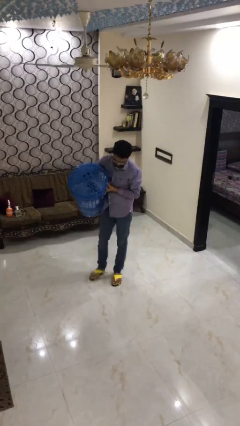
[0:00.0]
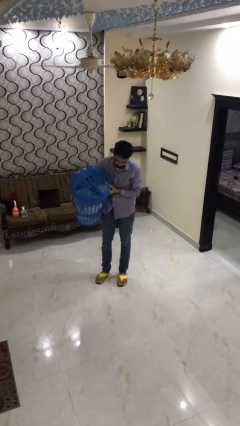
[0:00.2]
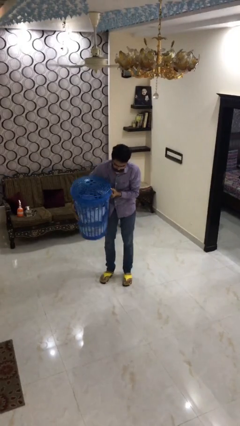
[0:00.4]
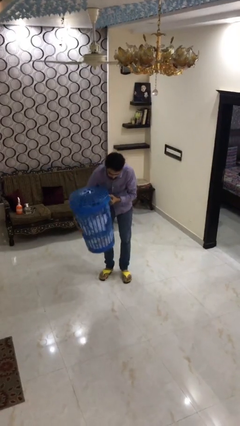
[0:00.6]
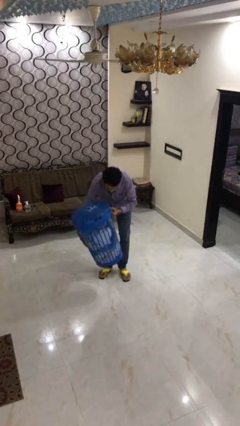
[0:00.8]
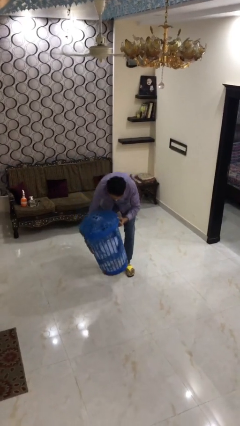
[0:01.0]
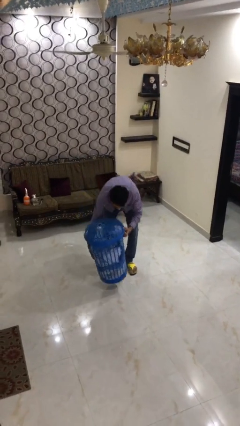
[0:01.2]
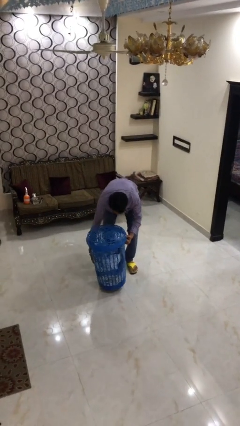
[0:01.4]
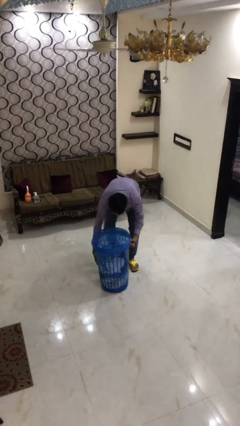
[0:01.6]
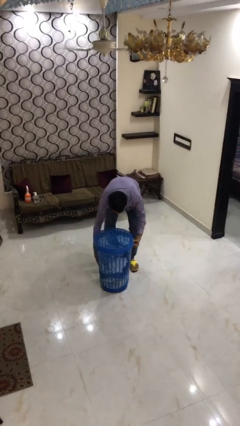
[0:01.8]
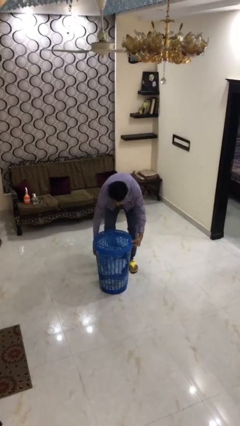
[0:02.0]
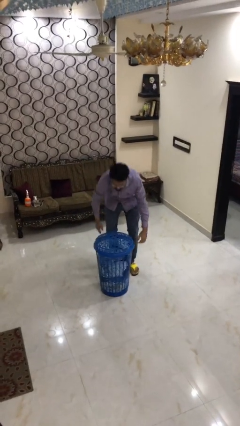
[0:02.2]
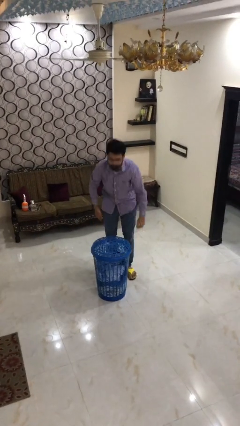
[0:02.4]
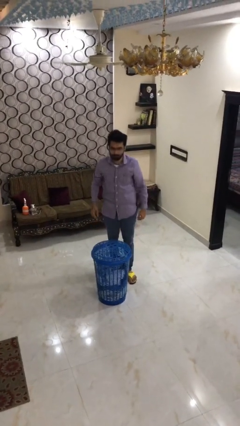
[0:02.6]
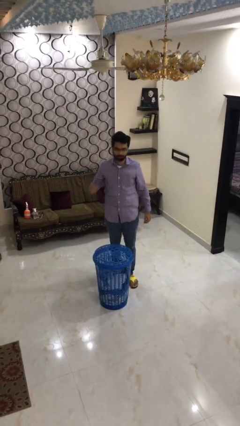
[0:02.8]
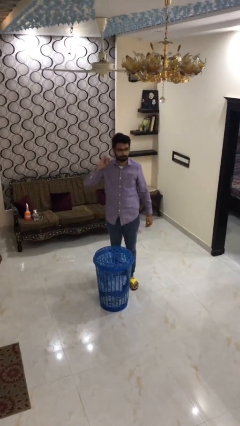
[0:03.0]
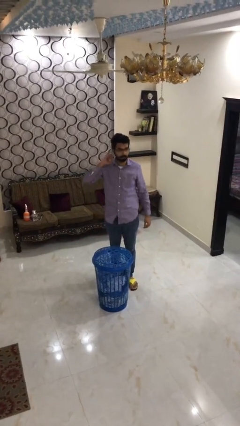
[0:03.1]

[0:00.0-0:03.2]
person puts down object on floor

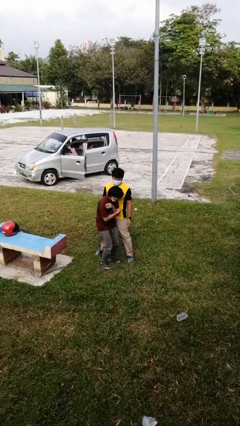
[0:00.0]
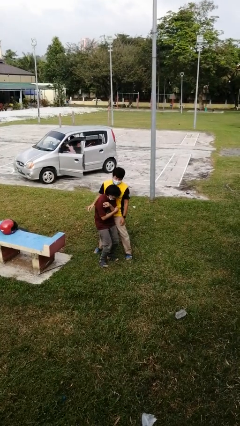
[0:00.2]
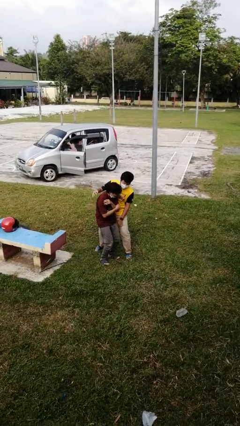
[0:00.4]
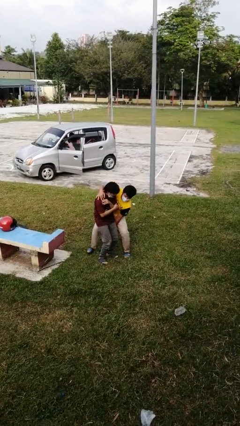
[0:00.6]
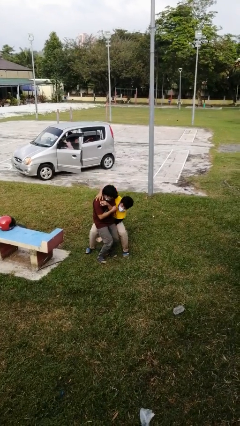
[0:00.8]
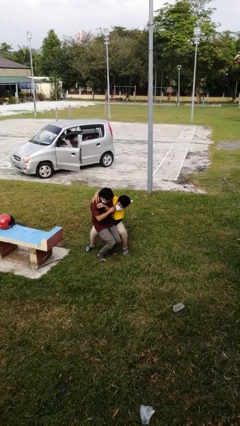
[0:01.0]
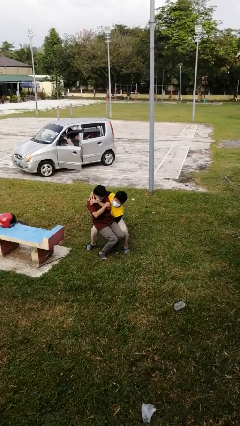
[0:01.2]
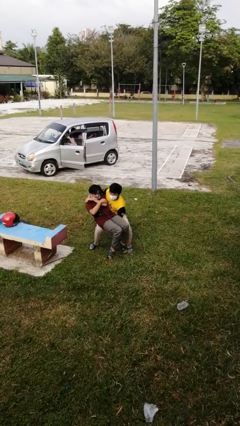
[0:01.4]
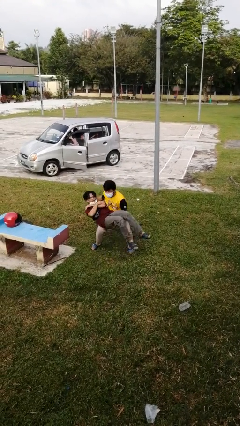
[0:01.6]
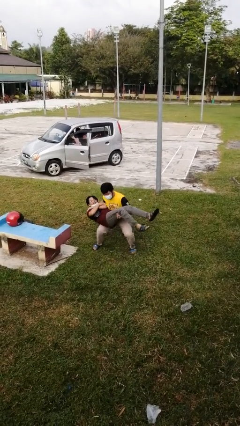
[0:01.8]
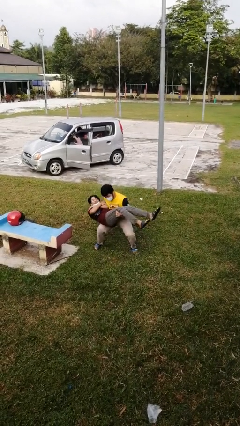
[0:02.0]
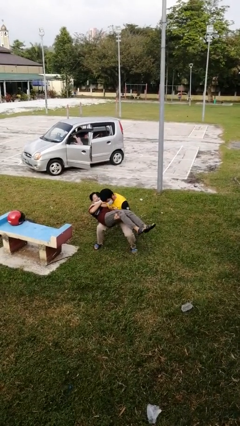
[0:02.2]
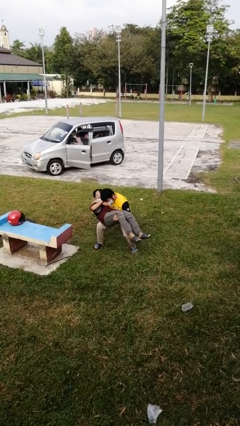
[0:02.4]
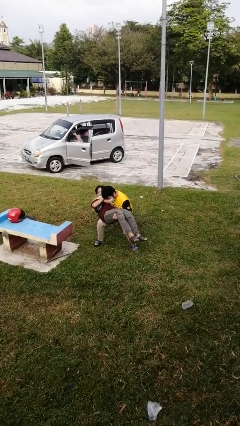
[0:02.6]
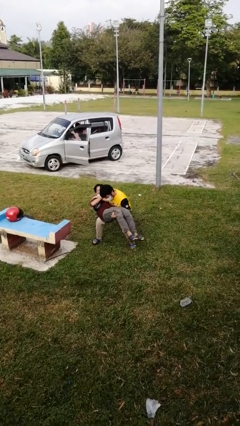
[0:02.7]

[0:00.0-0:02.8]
person picks up person

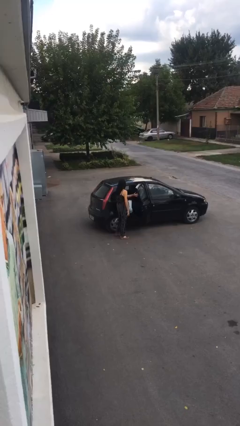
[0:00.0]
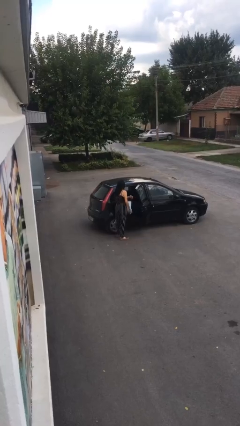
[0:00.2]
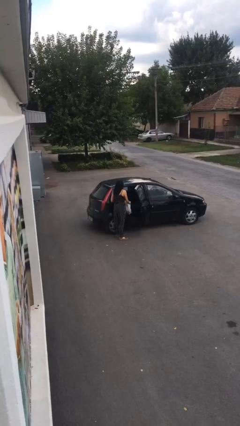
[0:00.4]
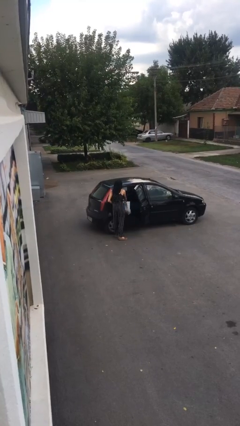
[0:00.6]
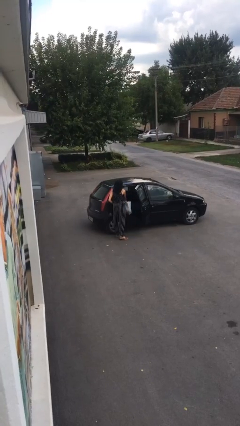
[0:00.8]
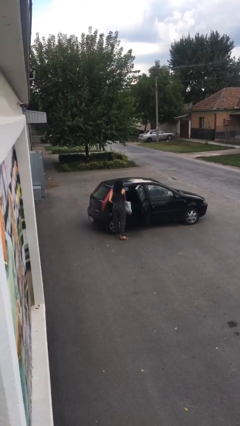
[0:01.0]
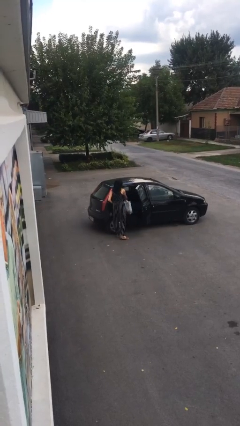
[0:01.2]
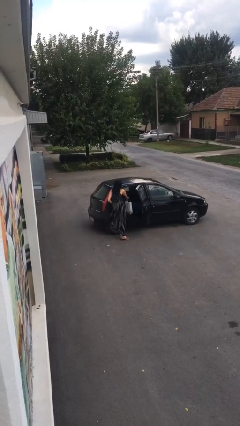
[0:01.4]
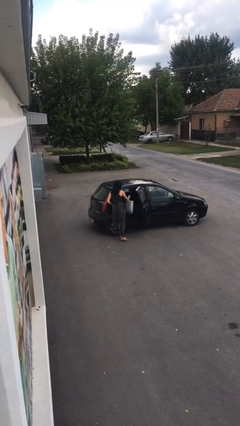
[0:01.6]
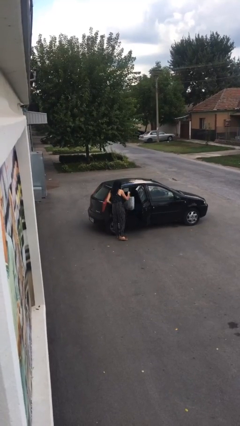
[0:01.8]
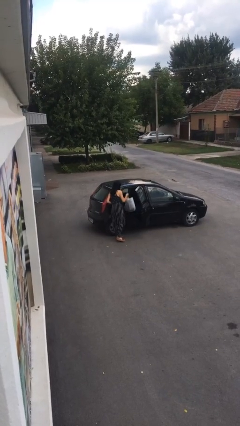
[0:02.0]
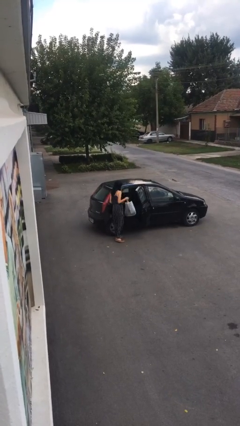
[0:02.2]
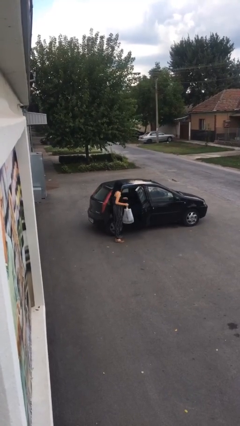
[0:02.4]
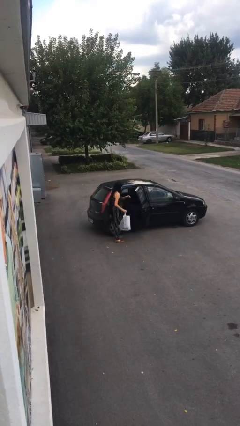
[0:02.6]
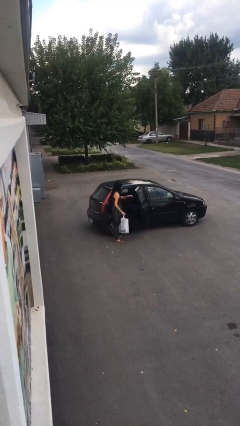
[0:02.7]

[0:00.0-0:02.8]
person unloads car

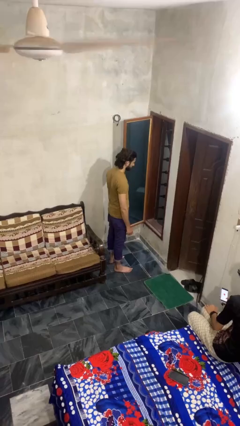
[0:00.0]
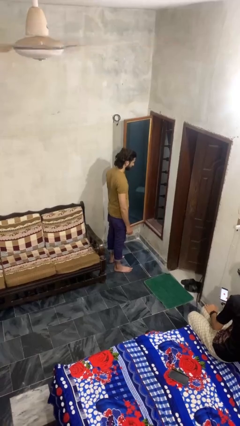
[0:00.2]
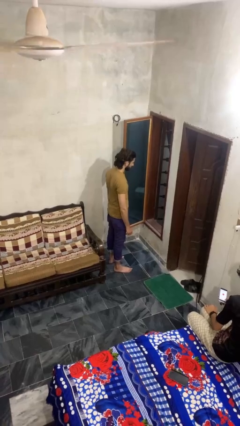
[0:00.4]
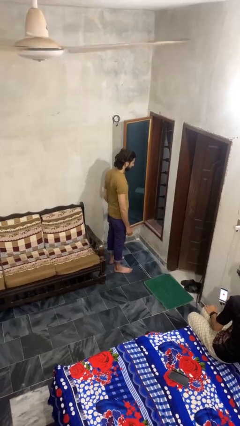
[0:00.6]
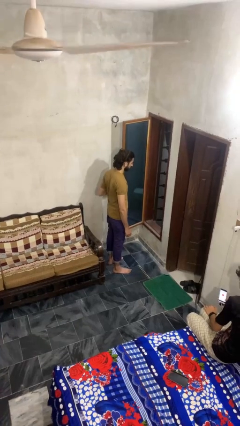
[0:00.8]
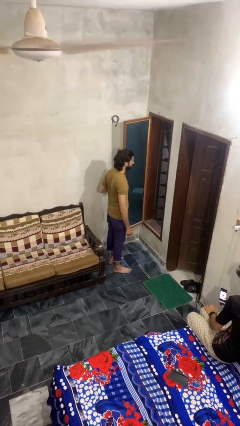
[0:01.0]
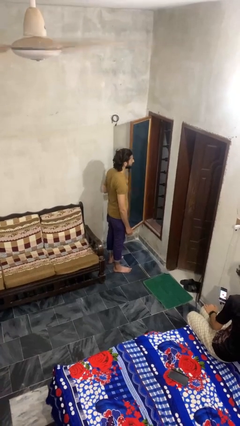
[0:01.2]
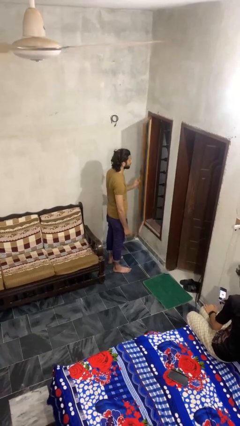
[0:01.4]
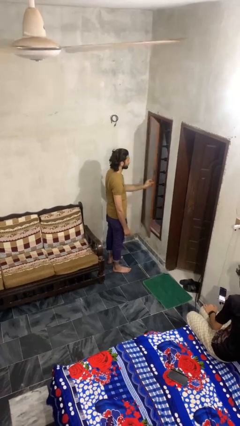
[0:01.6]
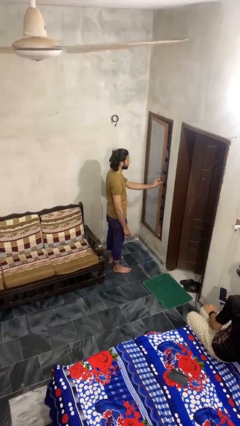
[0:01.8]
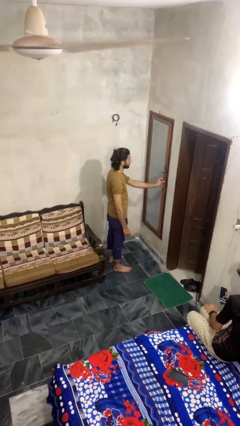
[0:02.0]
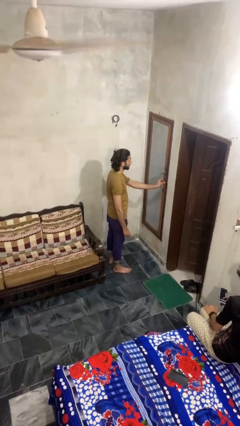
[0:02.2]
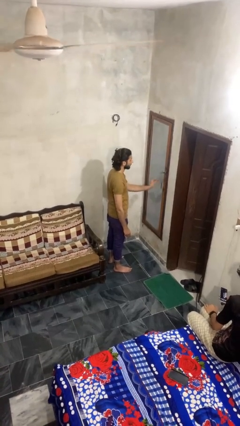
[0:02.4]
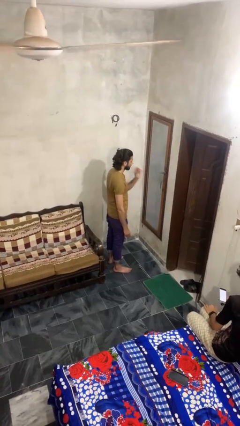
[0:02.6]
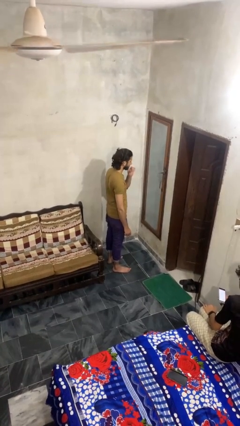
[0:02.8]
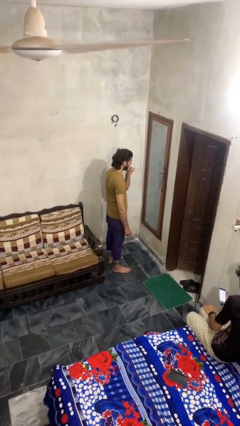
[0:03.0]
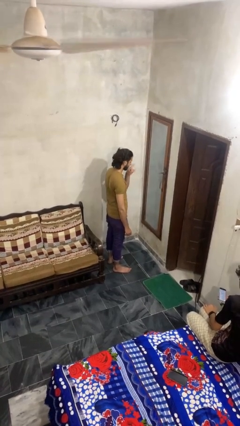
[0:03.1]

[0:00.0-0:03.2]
person closes home window

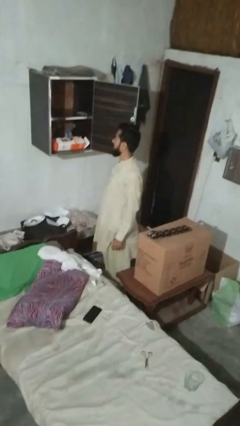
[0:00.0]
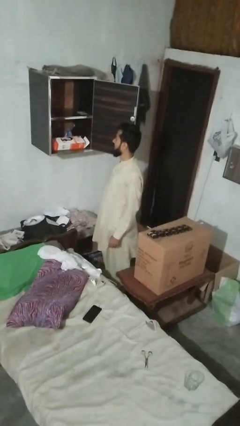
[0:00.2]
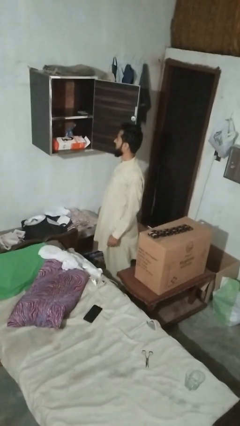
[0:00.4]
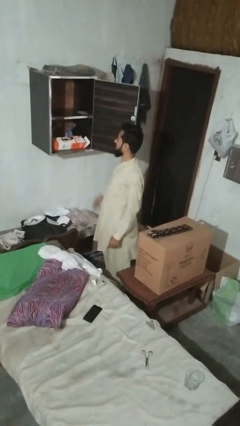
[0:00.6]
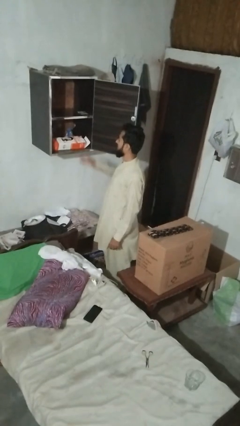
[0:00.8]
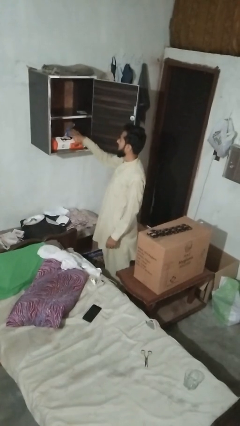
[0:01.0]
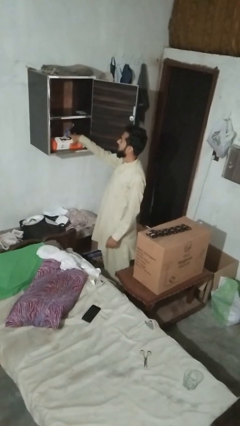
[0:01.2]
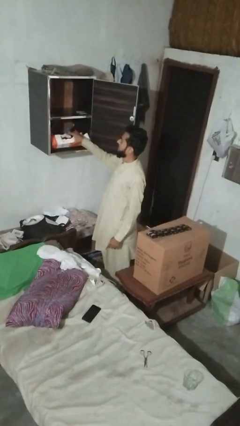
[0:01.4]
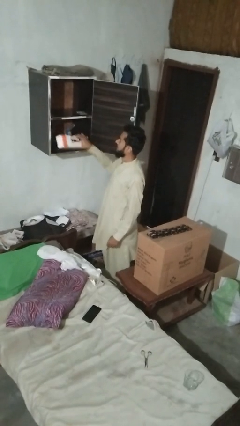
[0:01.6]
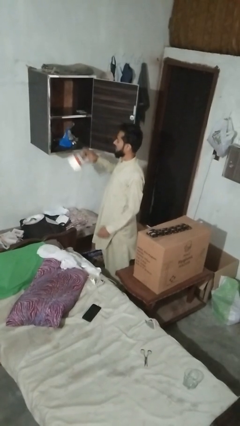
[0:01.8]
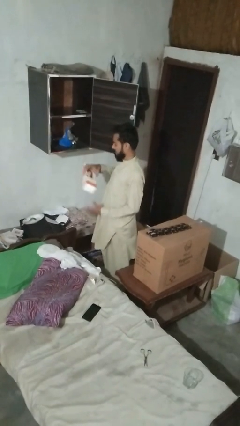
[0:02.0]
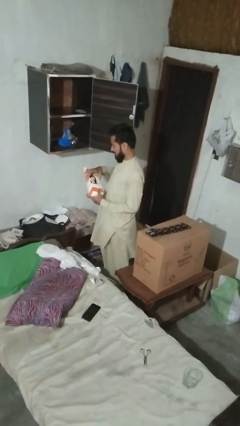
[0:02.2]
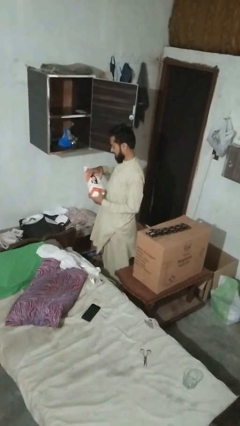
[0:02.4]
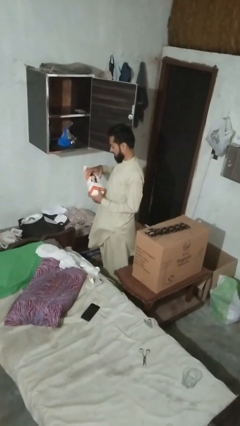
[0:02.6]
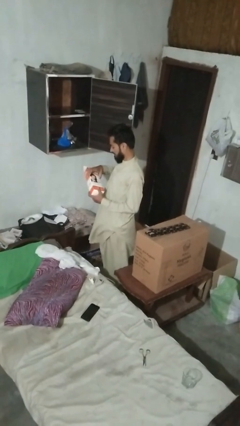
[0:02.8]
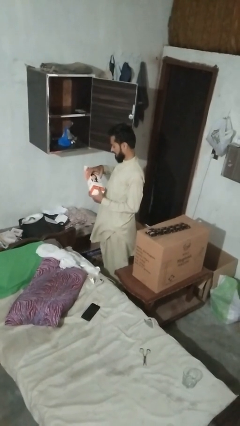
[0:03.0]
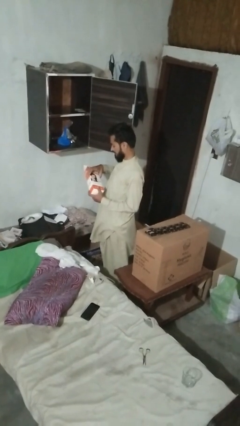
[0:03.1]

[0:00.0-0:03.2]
person picks up object from cabinet

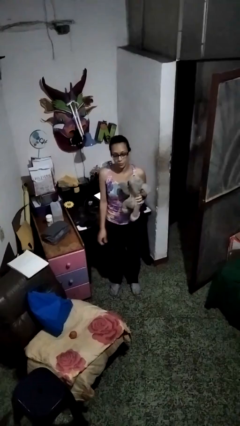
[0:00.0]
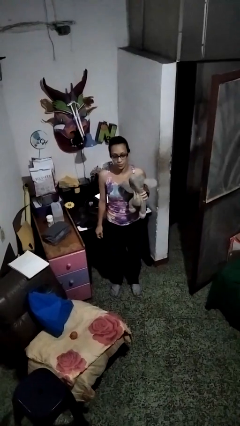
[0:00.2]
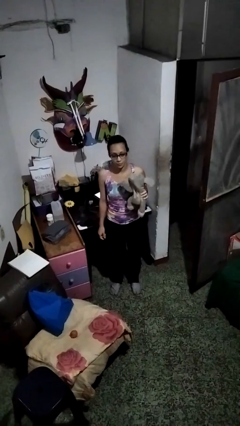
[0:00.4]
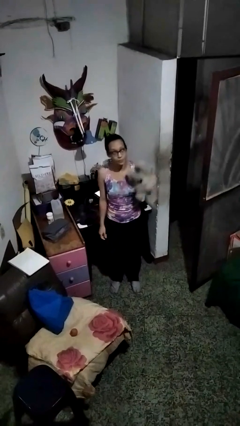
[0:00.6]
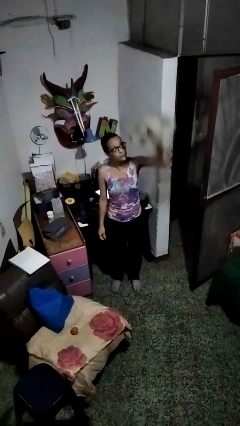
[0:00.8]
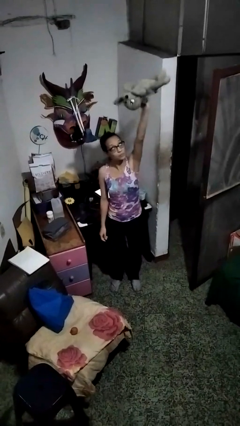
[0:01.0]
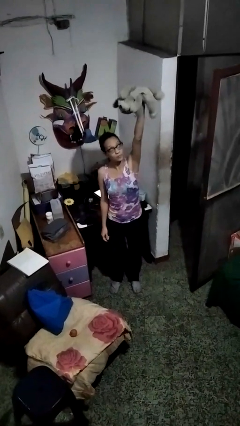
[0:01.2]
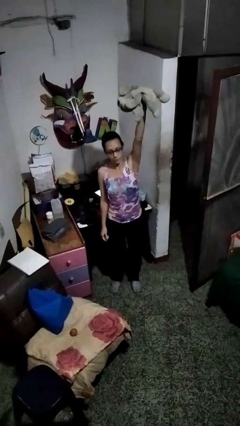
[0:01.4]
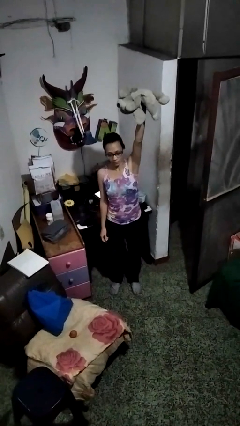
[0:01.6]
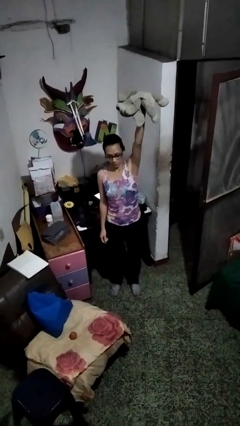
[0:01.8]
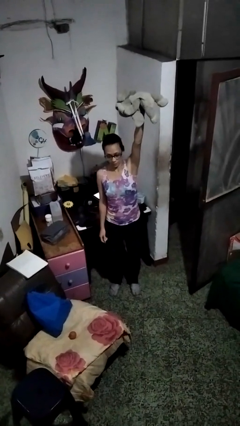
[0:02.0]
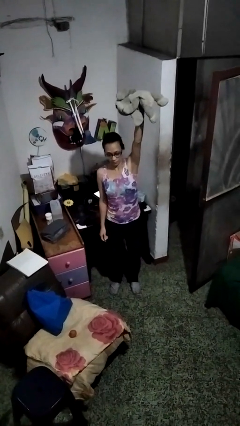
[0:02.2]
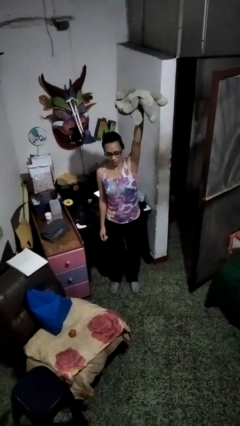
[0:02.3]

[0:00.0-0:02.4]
person drops object

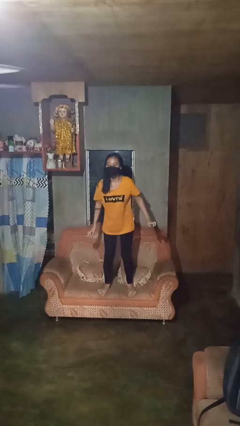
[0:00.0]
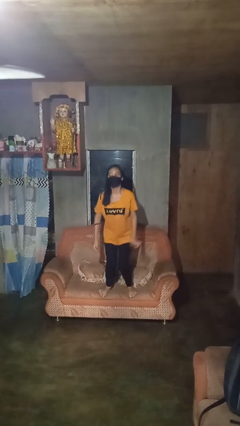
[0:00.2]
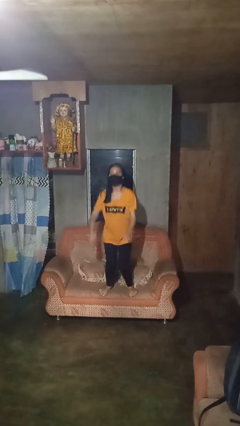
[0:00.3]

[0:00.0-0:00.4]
person jumps on couch
